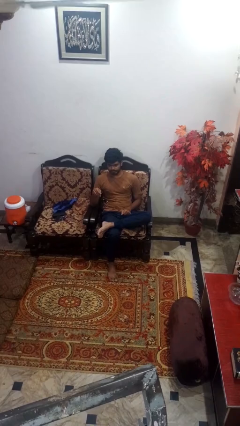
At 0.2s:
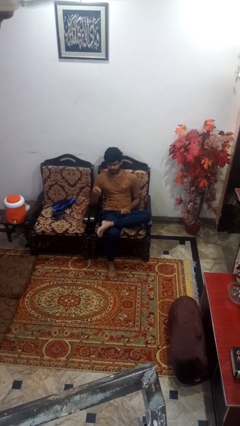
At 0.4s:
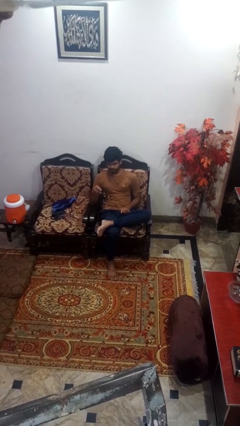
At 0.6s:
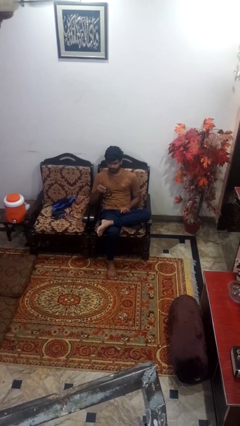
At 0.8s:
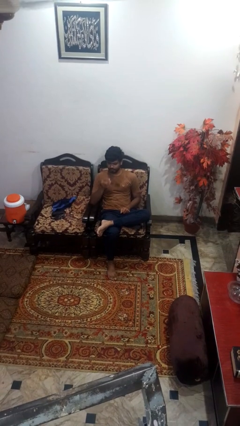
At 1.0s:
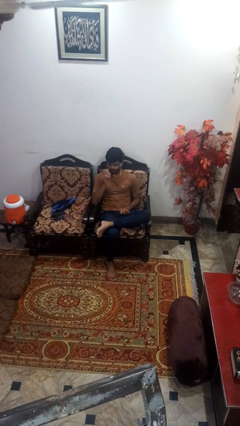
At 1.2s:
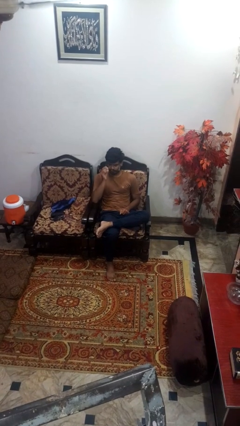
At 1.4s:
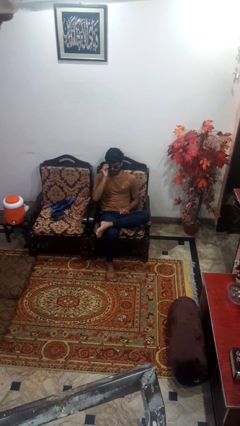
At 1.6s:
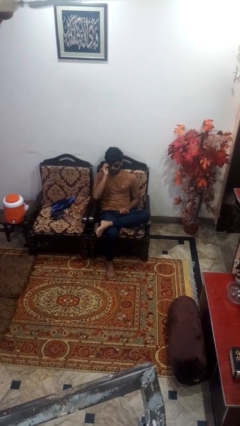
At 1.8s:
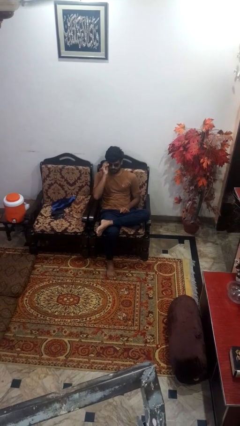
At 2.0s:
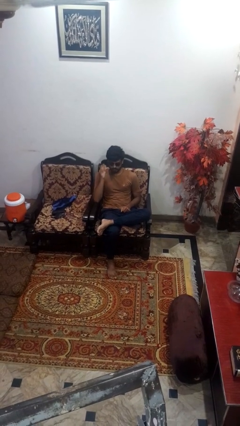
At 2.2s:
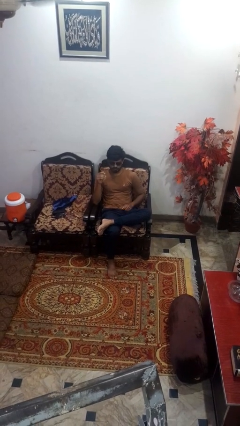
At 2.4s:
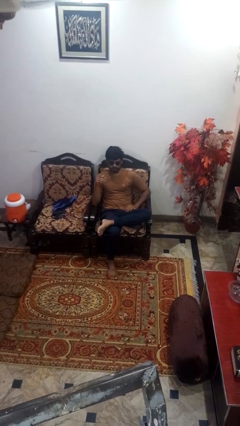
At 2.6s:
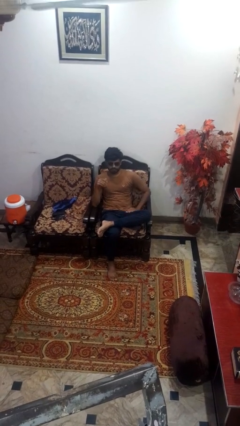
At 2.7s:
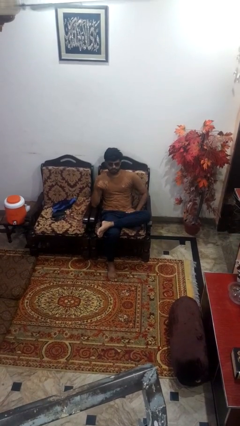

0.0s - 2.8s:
person puts on sunglasses

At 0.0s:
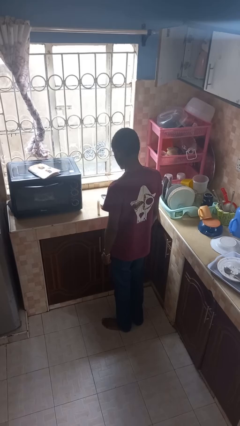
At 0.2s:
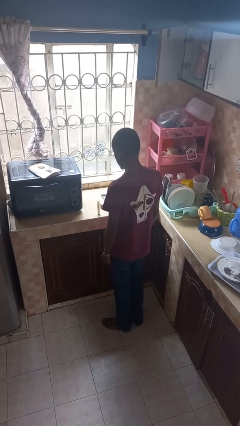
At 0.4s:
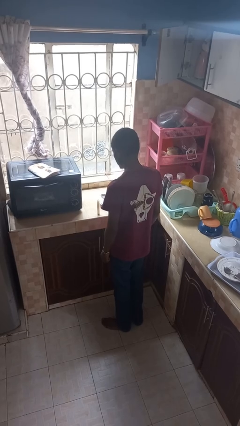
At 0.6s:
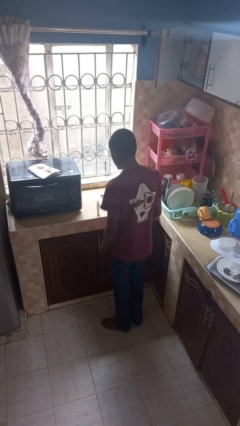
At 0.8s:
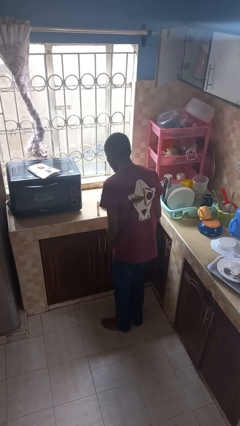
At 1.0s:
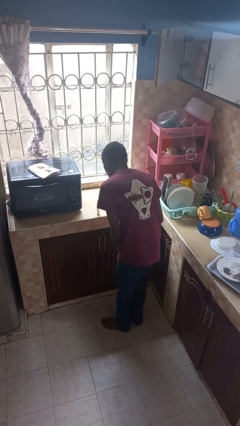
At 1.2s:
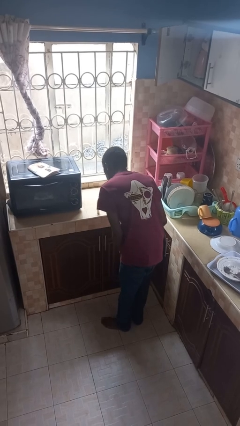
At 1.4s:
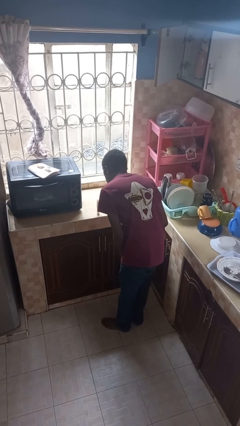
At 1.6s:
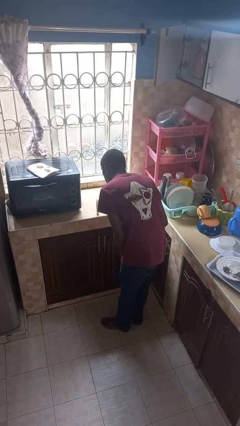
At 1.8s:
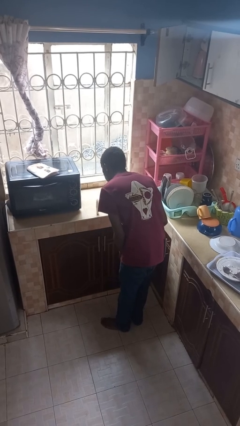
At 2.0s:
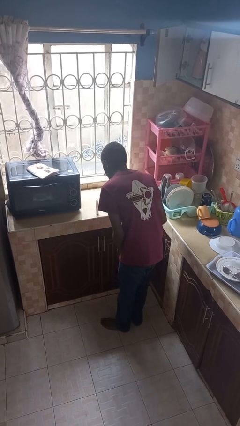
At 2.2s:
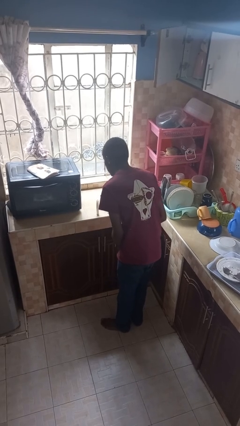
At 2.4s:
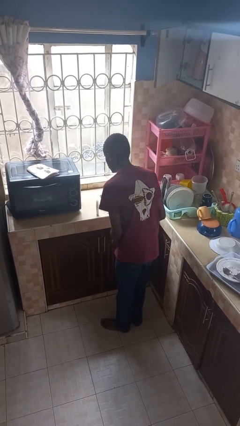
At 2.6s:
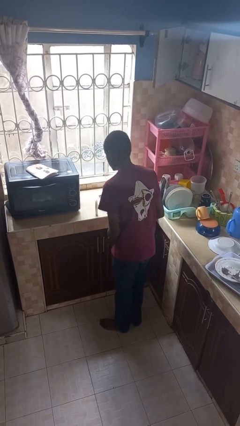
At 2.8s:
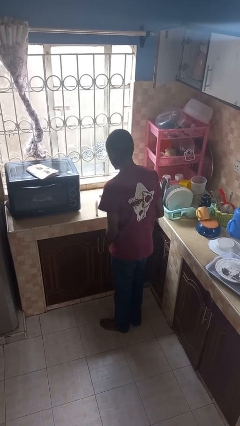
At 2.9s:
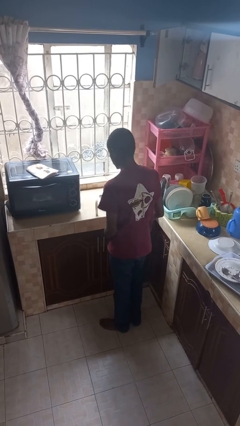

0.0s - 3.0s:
person extinguishes candle

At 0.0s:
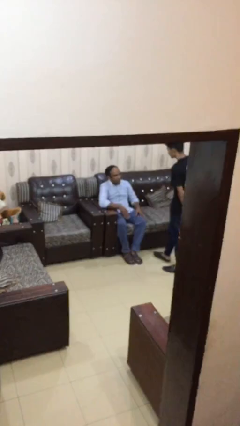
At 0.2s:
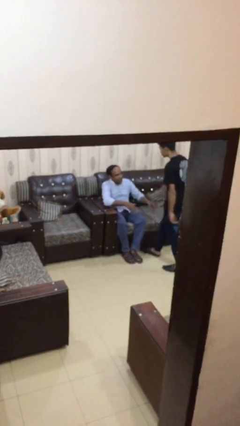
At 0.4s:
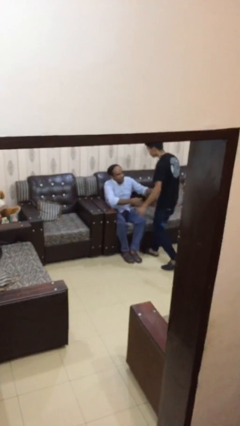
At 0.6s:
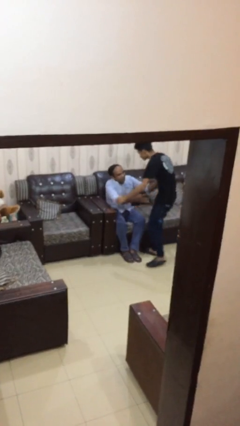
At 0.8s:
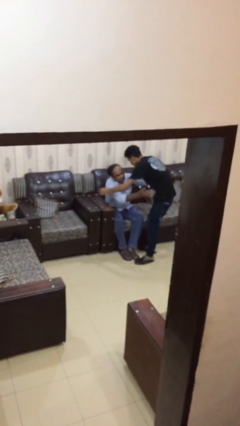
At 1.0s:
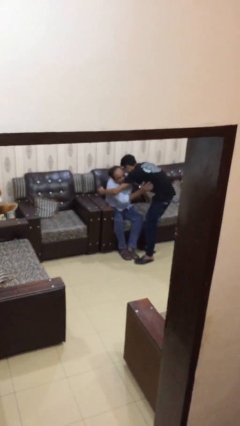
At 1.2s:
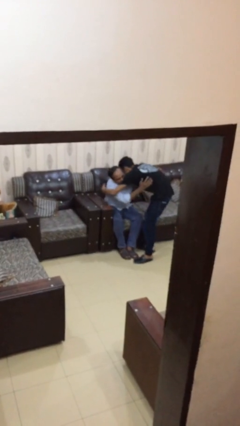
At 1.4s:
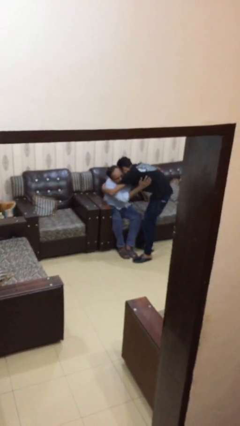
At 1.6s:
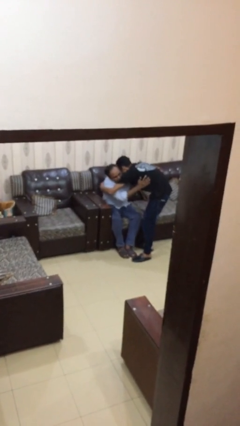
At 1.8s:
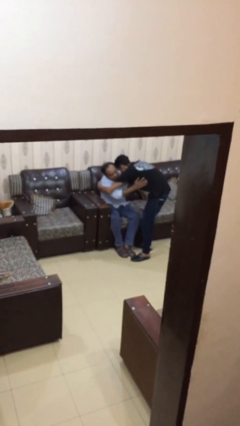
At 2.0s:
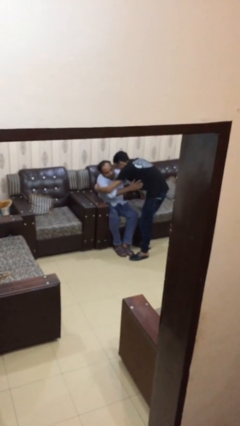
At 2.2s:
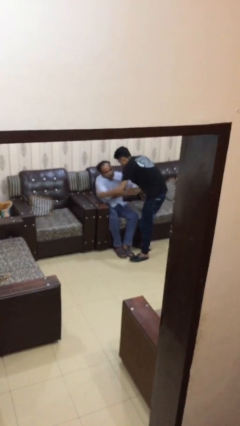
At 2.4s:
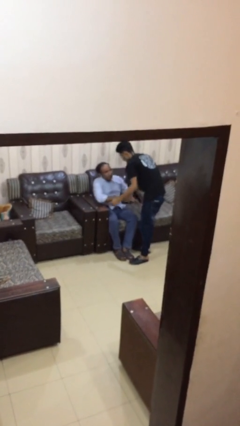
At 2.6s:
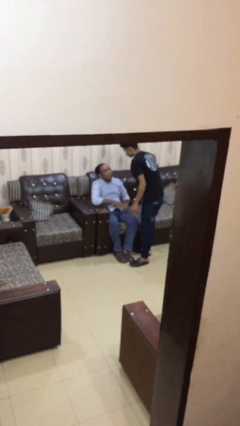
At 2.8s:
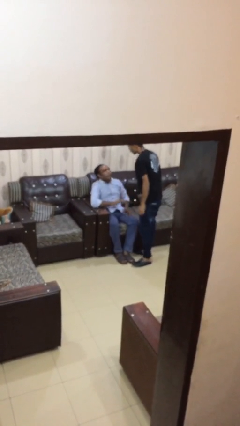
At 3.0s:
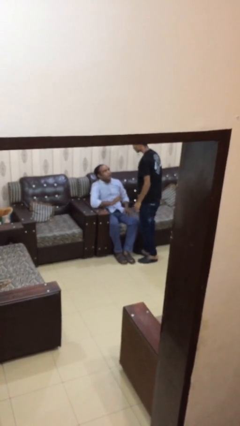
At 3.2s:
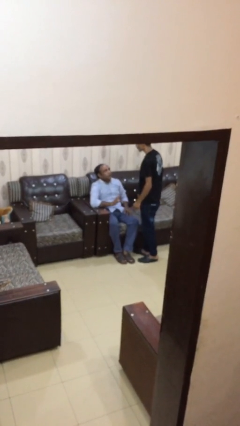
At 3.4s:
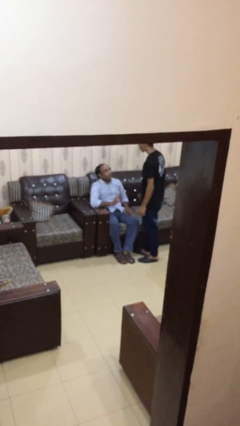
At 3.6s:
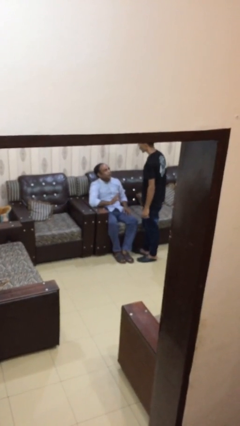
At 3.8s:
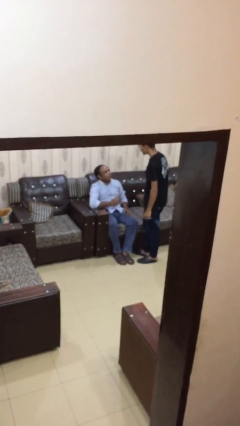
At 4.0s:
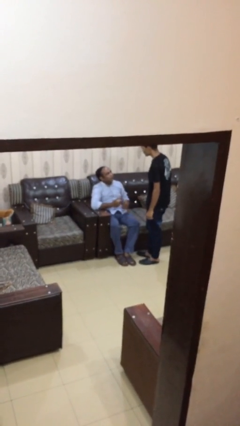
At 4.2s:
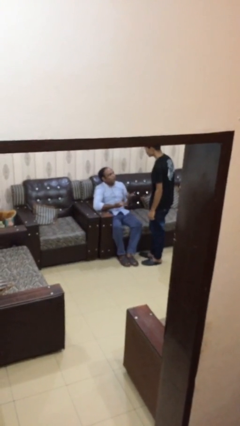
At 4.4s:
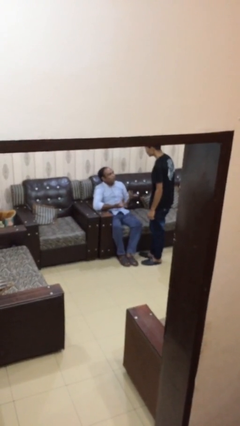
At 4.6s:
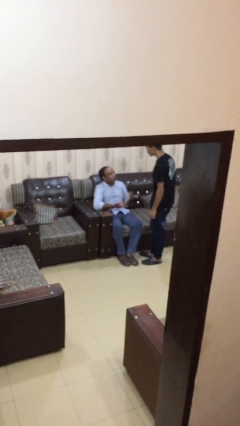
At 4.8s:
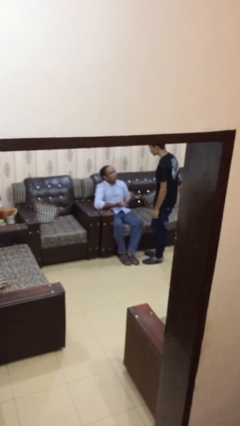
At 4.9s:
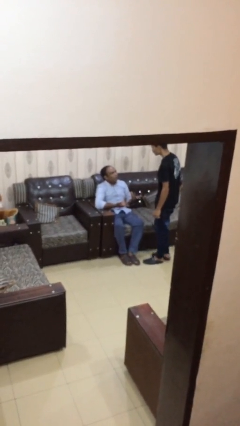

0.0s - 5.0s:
person embraces person

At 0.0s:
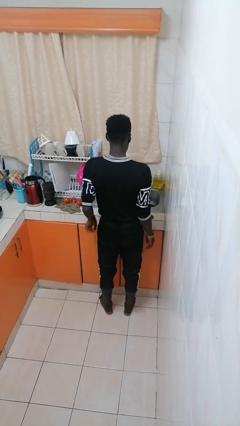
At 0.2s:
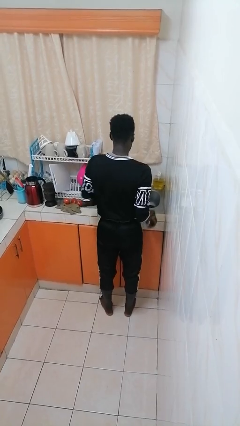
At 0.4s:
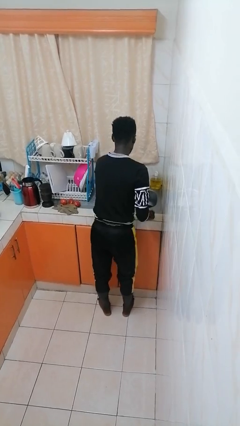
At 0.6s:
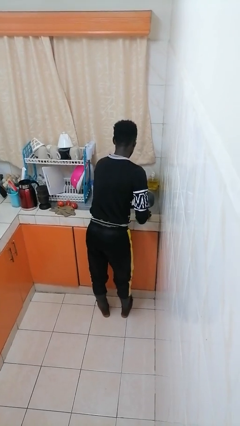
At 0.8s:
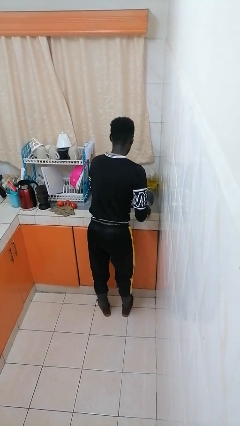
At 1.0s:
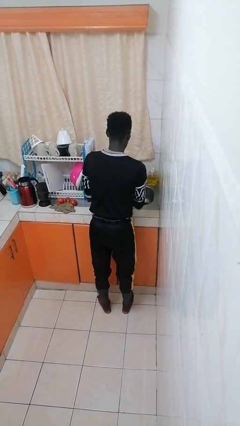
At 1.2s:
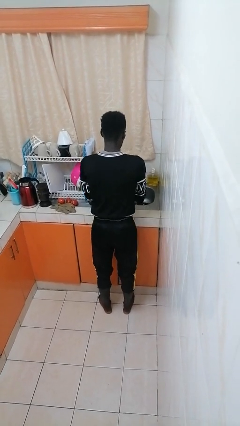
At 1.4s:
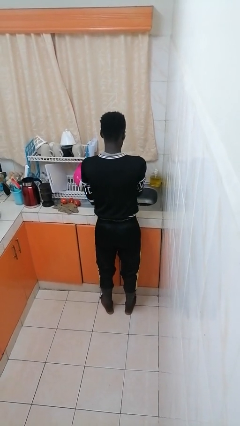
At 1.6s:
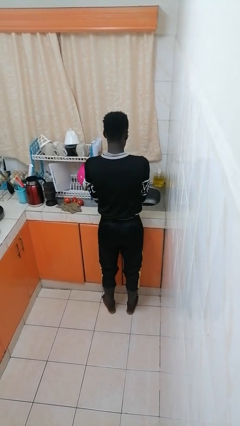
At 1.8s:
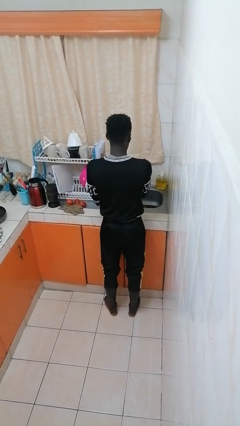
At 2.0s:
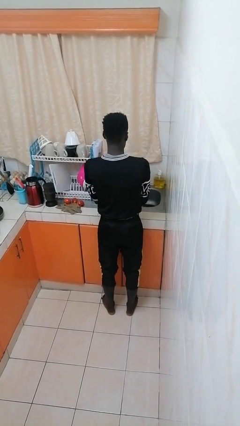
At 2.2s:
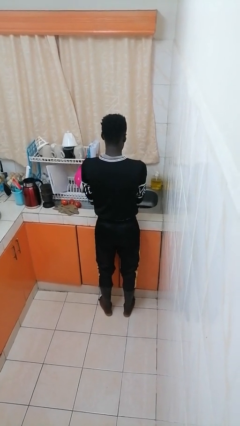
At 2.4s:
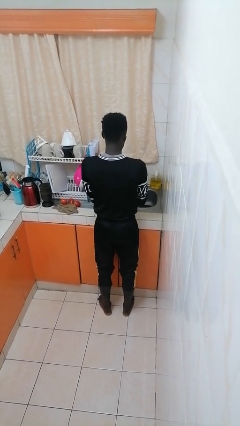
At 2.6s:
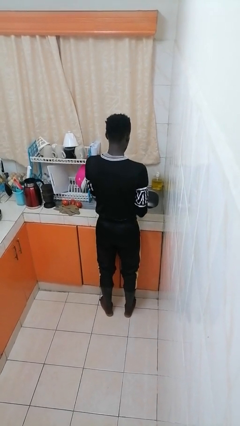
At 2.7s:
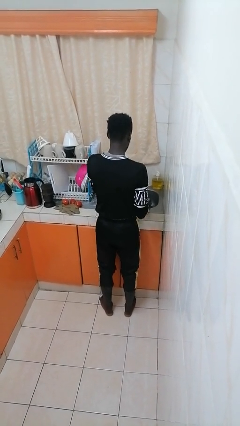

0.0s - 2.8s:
person washes dish

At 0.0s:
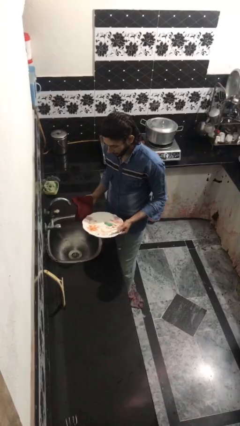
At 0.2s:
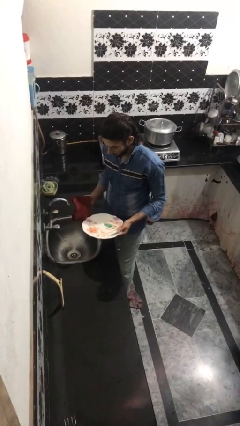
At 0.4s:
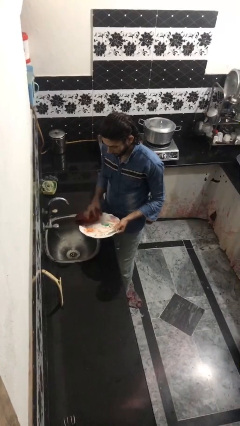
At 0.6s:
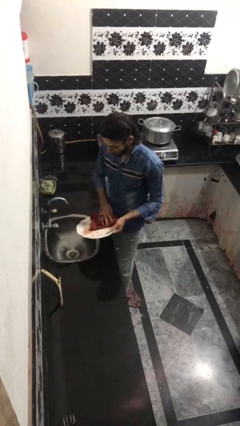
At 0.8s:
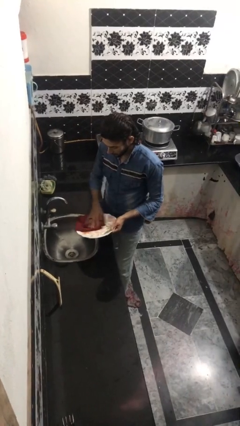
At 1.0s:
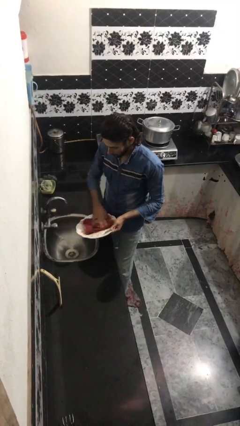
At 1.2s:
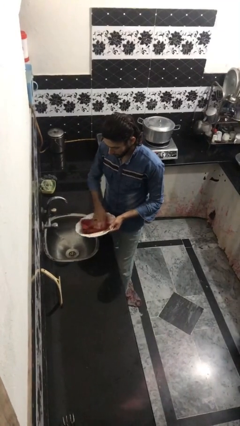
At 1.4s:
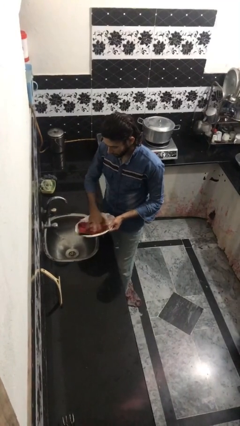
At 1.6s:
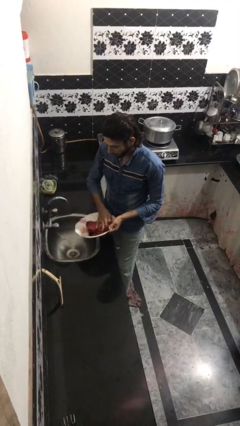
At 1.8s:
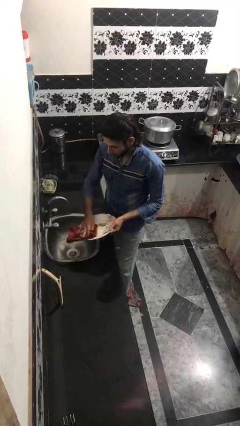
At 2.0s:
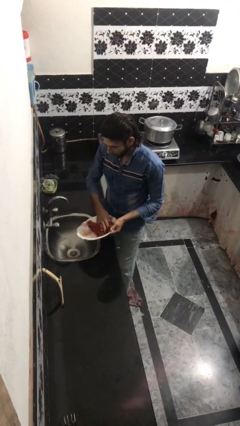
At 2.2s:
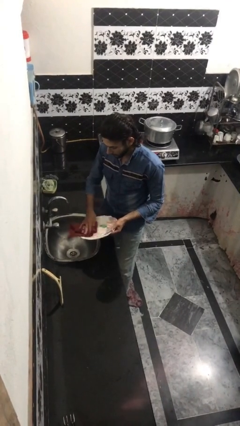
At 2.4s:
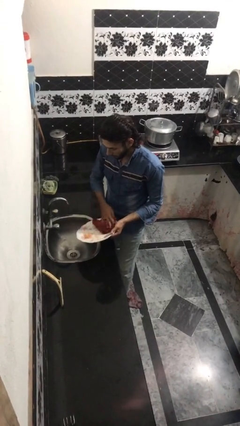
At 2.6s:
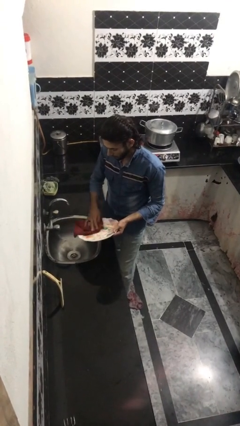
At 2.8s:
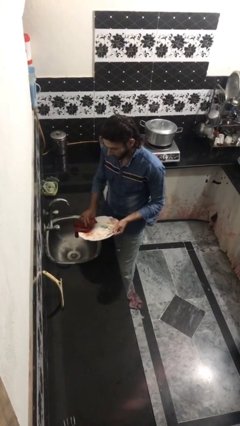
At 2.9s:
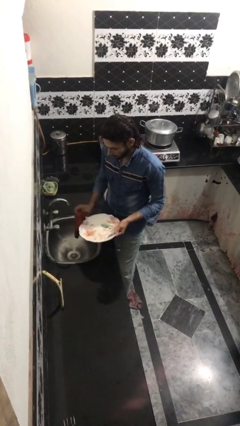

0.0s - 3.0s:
person dries dish

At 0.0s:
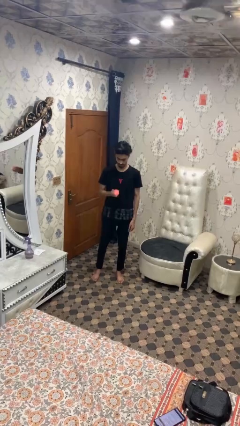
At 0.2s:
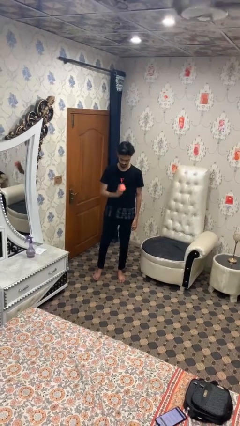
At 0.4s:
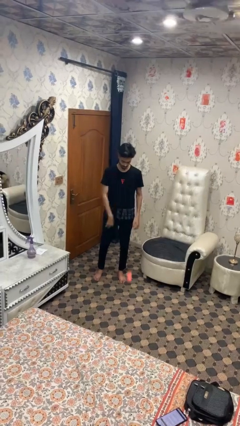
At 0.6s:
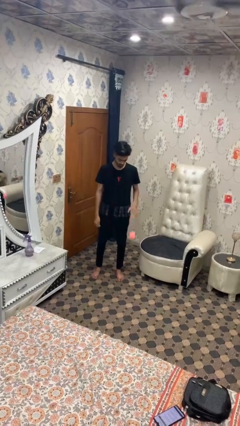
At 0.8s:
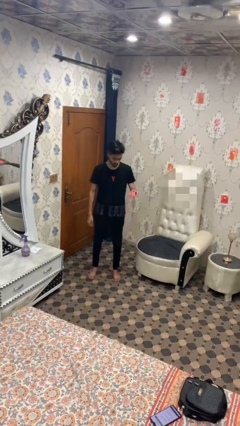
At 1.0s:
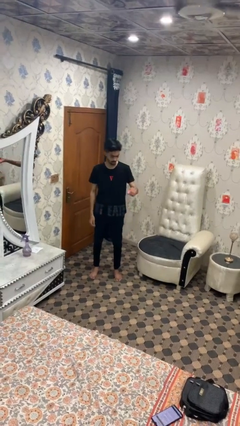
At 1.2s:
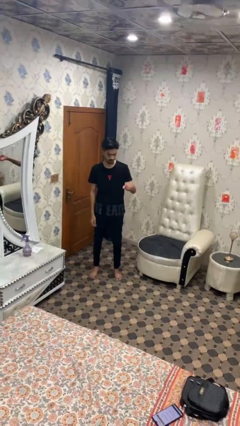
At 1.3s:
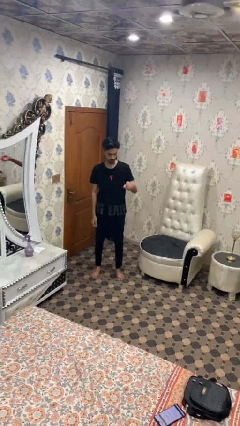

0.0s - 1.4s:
person bounces ball on floor
